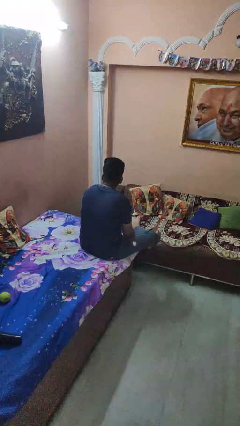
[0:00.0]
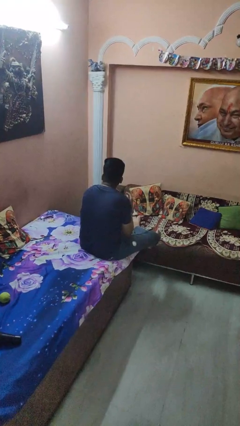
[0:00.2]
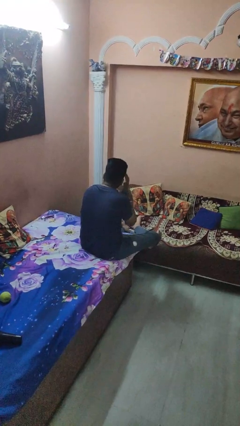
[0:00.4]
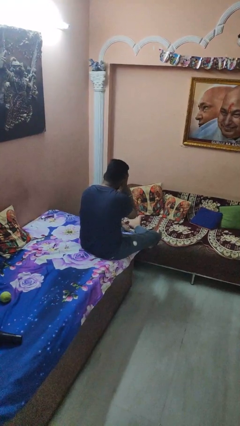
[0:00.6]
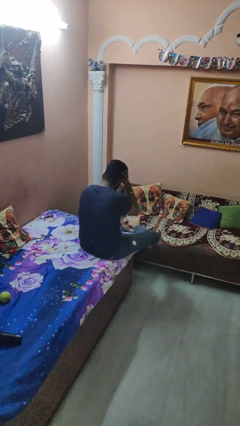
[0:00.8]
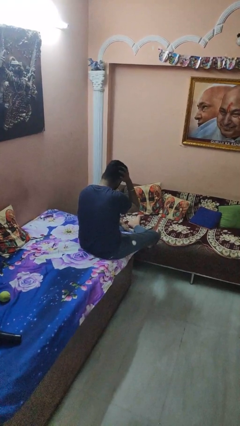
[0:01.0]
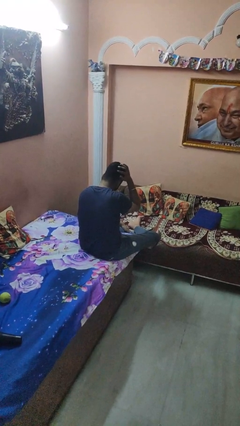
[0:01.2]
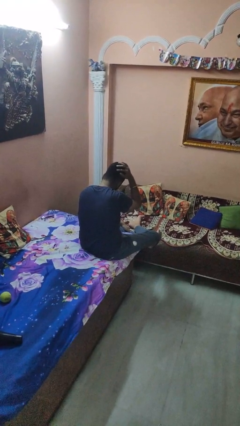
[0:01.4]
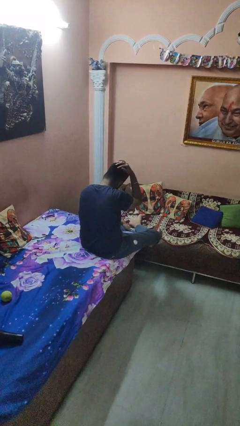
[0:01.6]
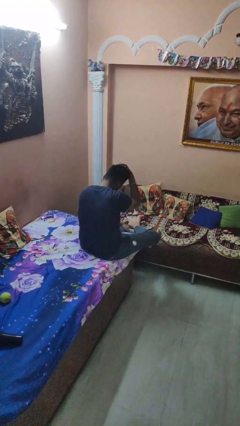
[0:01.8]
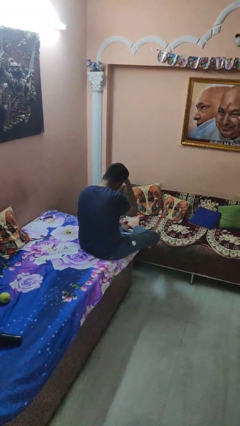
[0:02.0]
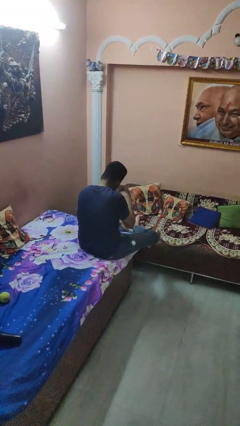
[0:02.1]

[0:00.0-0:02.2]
person strokes hair

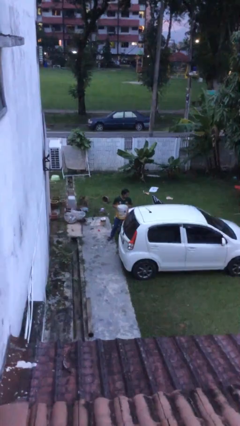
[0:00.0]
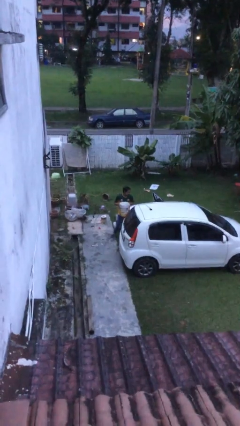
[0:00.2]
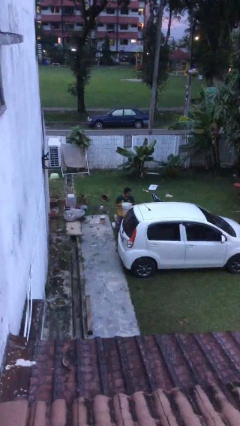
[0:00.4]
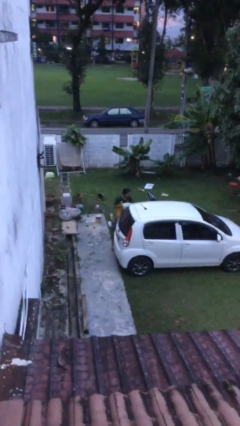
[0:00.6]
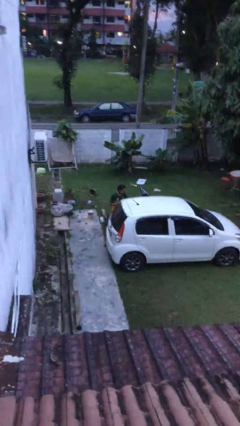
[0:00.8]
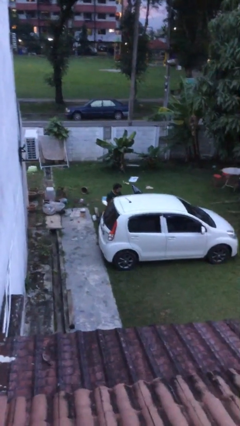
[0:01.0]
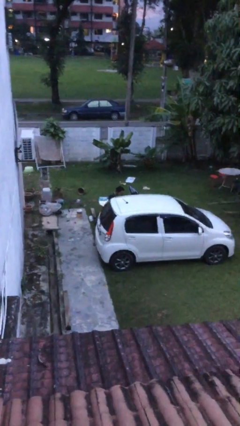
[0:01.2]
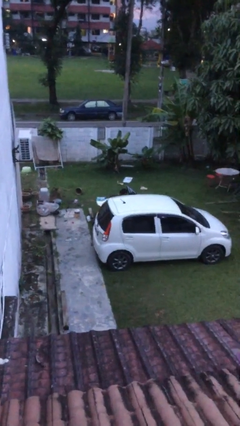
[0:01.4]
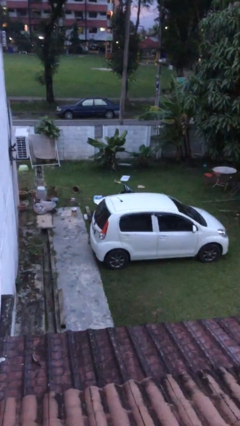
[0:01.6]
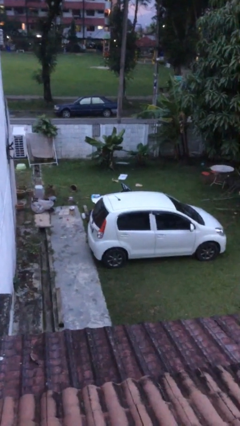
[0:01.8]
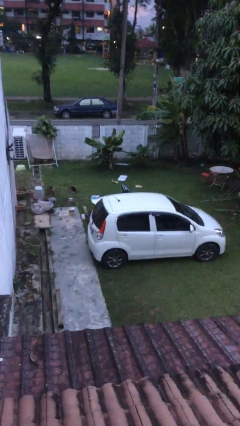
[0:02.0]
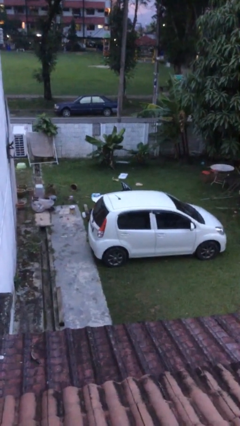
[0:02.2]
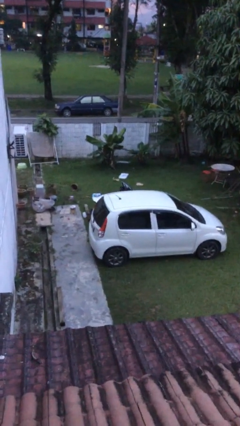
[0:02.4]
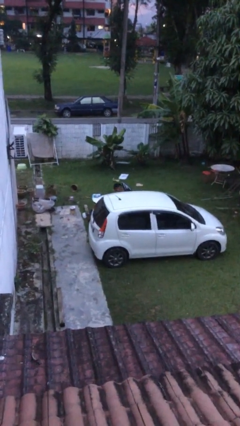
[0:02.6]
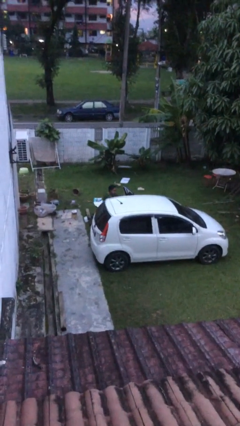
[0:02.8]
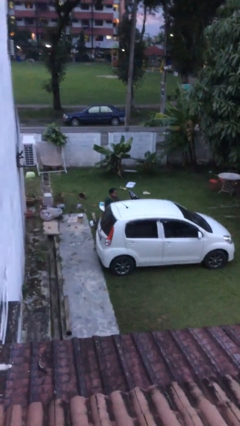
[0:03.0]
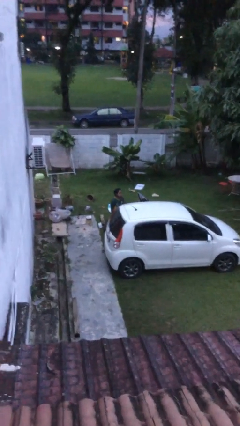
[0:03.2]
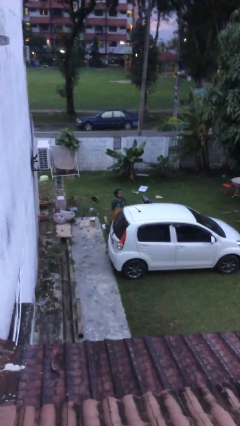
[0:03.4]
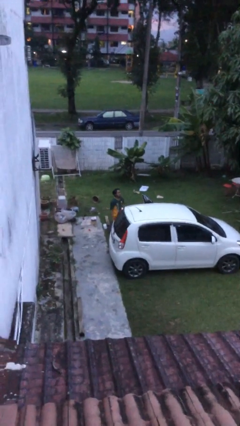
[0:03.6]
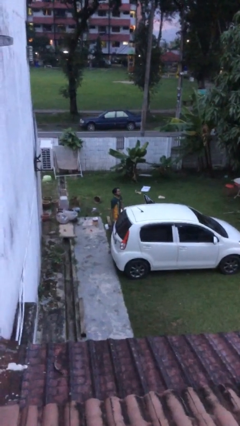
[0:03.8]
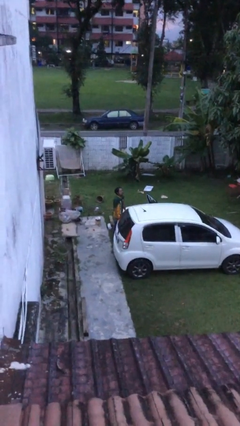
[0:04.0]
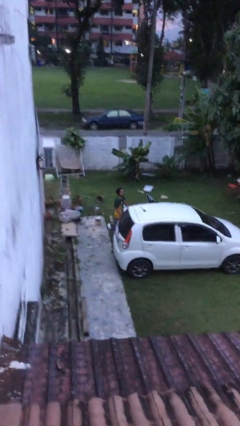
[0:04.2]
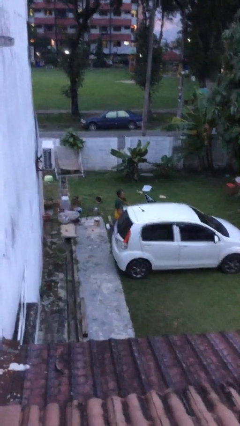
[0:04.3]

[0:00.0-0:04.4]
person loads car

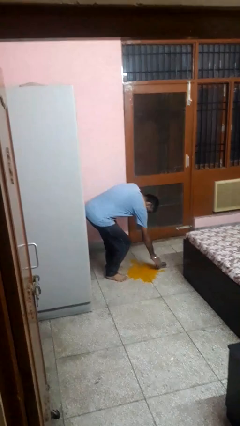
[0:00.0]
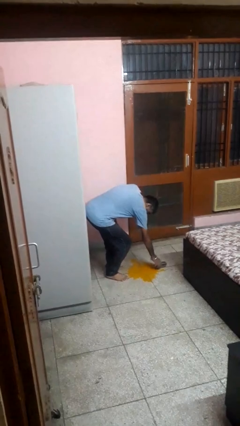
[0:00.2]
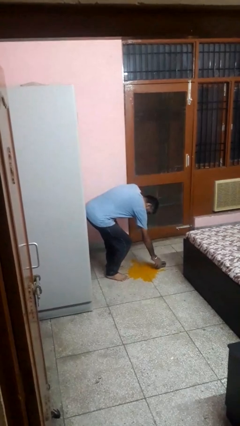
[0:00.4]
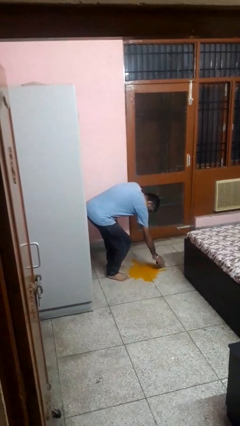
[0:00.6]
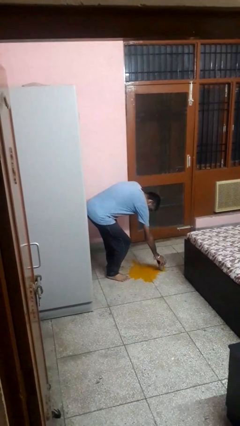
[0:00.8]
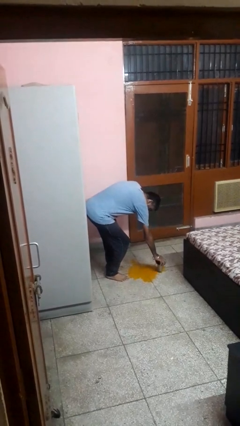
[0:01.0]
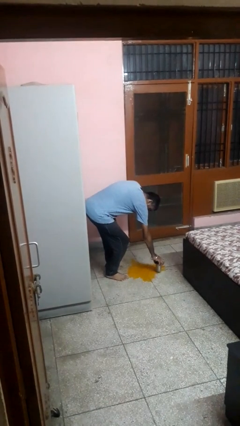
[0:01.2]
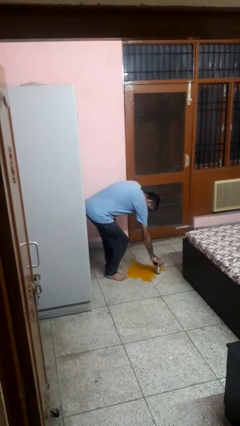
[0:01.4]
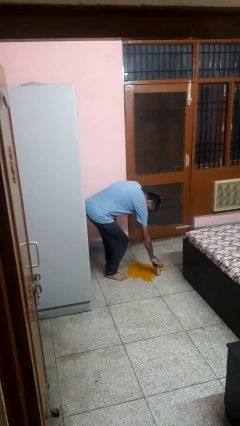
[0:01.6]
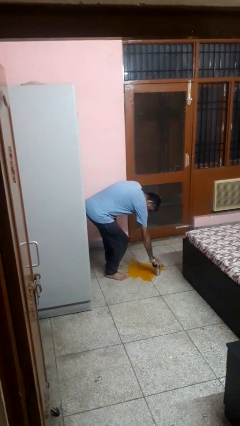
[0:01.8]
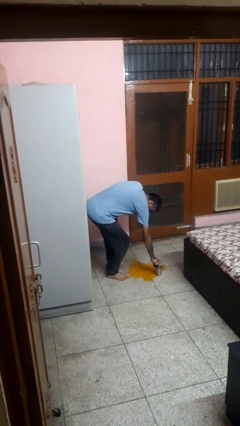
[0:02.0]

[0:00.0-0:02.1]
person sets upright glass

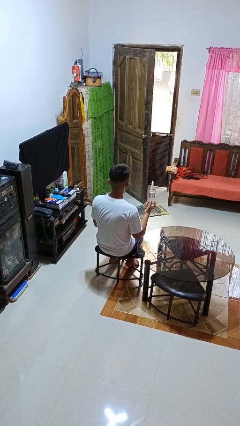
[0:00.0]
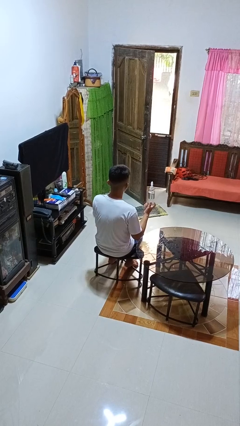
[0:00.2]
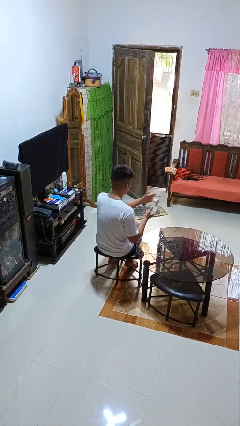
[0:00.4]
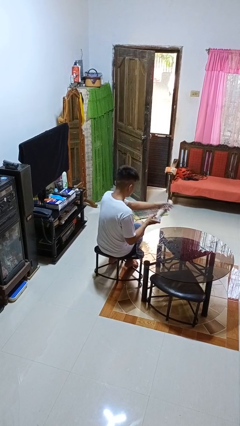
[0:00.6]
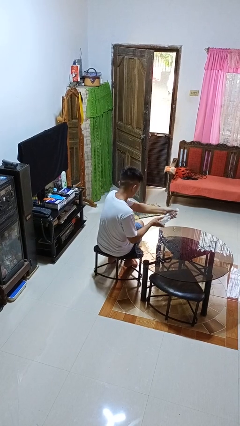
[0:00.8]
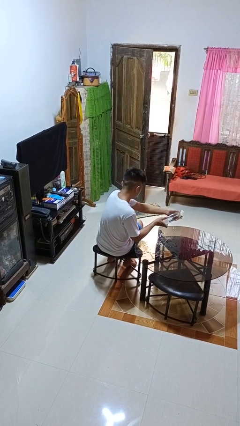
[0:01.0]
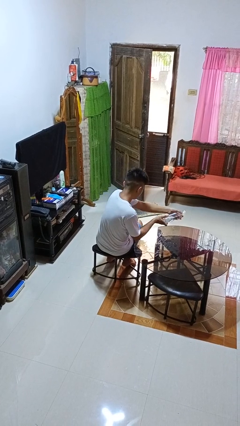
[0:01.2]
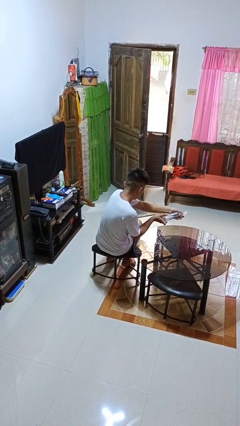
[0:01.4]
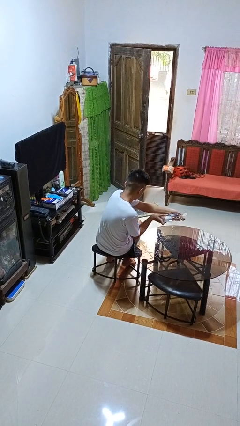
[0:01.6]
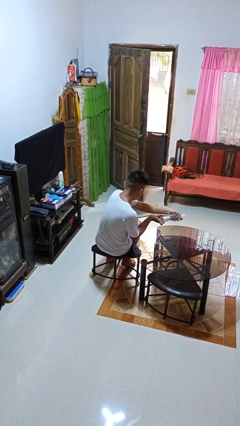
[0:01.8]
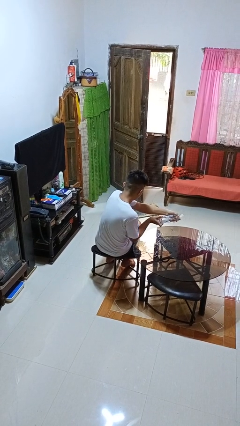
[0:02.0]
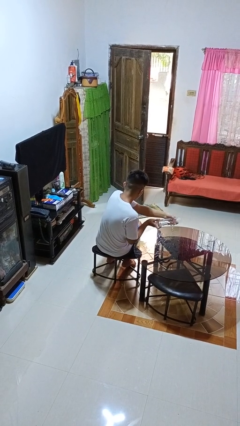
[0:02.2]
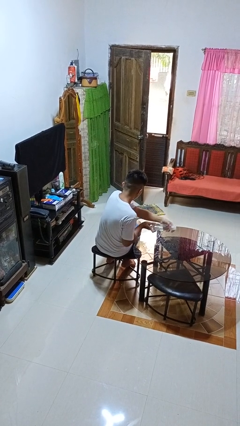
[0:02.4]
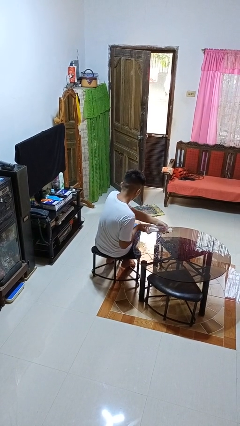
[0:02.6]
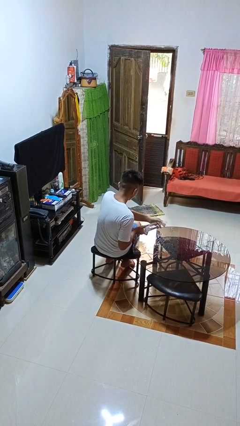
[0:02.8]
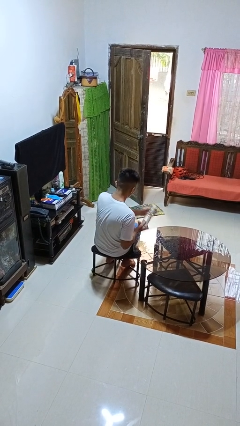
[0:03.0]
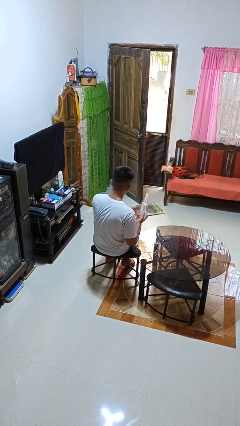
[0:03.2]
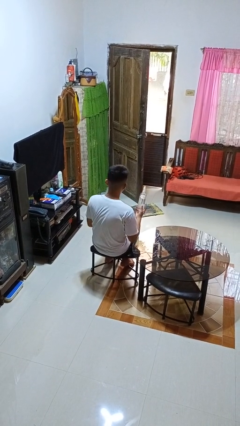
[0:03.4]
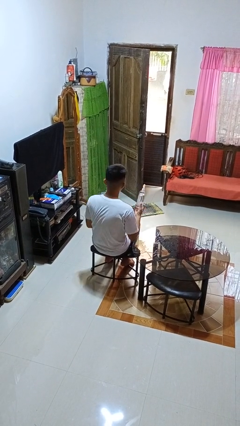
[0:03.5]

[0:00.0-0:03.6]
person sprays from bottle

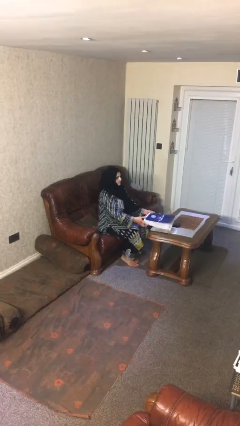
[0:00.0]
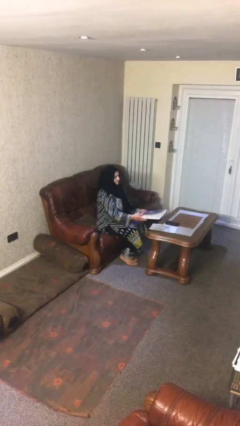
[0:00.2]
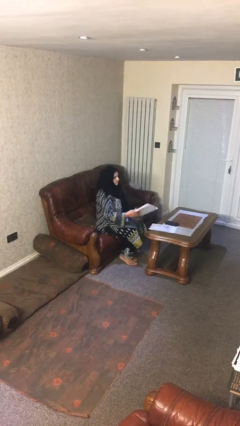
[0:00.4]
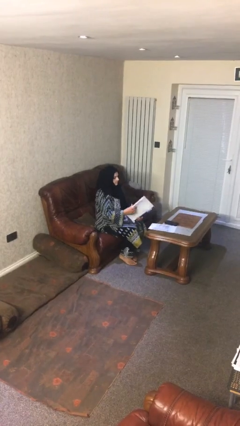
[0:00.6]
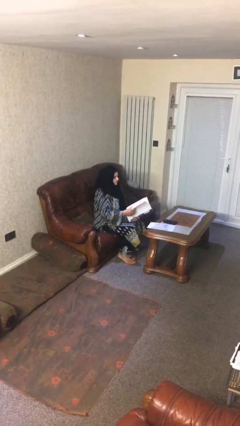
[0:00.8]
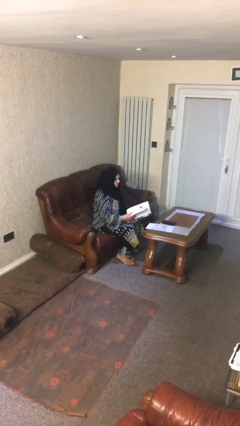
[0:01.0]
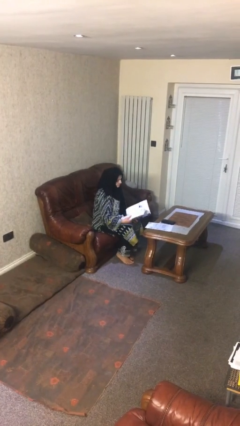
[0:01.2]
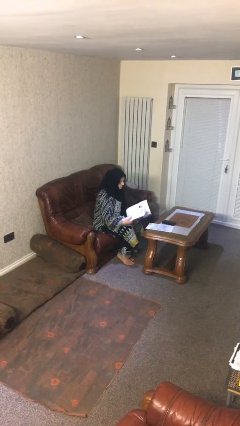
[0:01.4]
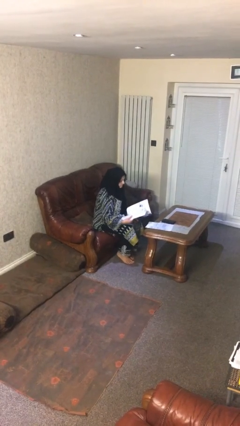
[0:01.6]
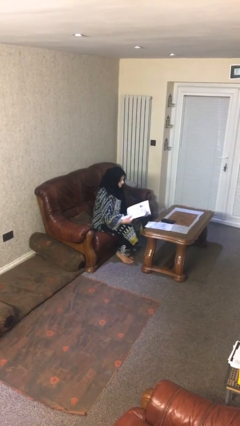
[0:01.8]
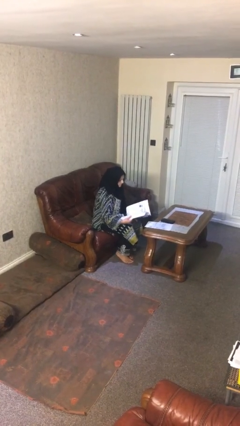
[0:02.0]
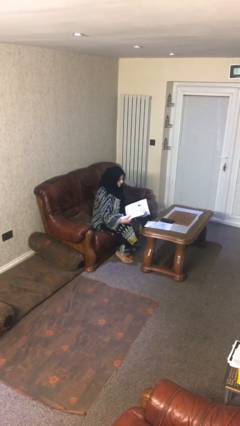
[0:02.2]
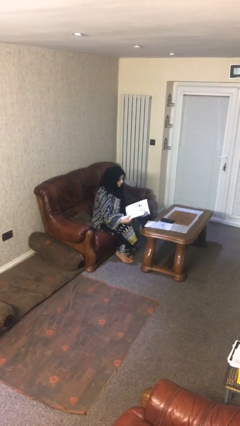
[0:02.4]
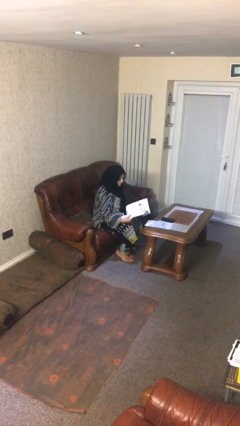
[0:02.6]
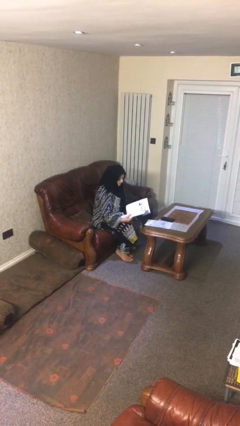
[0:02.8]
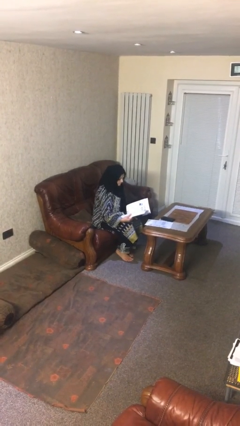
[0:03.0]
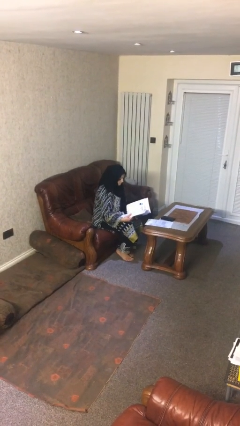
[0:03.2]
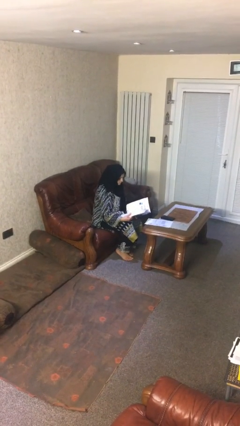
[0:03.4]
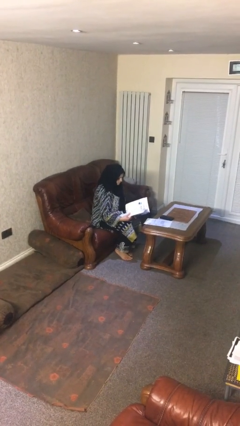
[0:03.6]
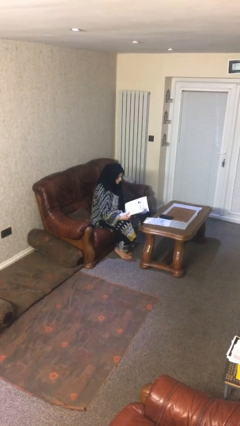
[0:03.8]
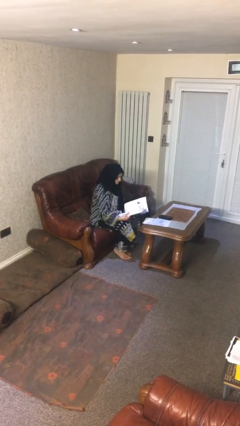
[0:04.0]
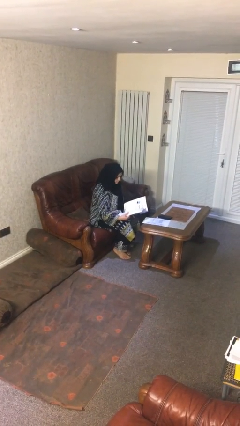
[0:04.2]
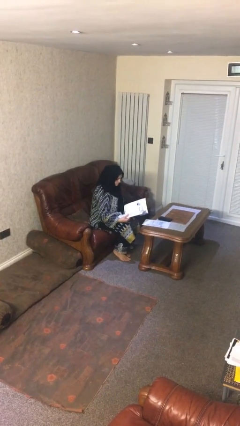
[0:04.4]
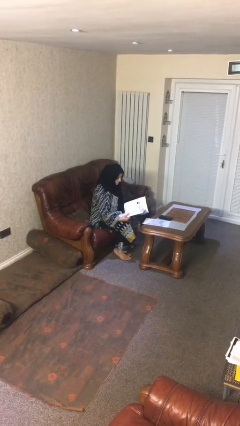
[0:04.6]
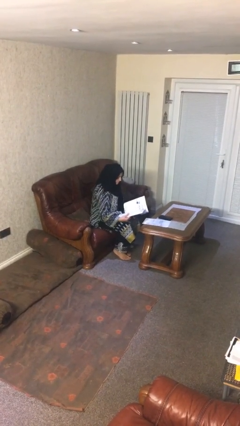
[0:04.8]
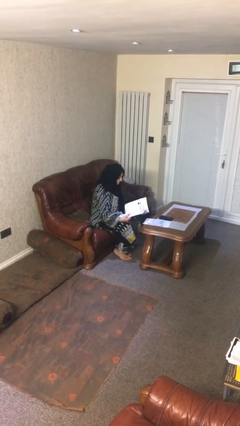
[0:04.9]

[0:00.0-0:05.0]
person reads document

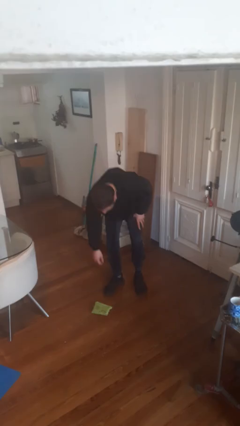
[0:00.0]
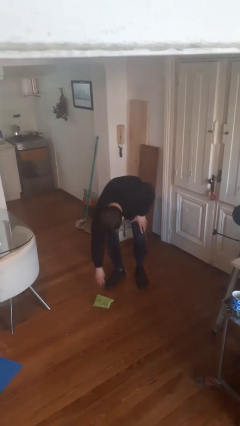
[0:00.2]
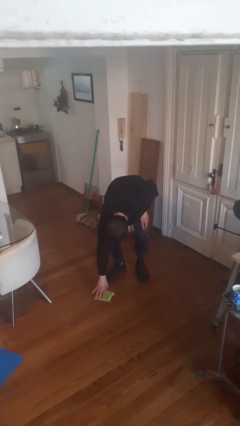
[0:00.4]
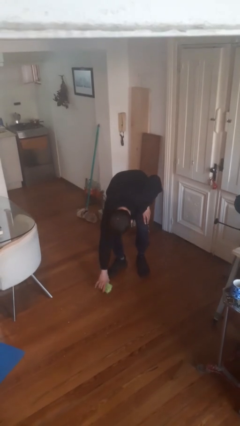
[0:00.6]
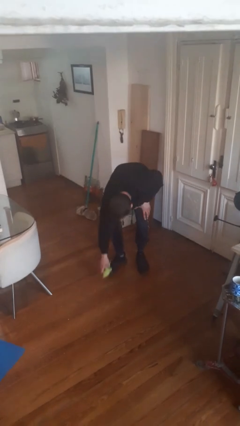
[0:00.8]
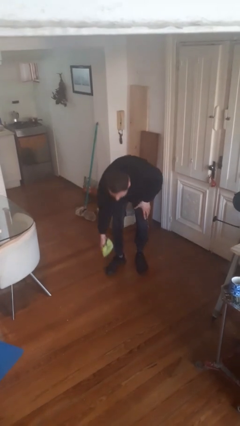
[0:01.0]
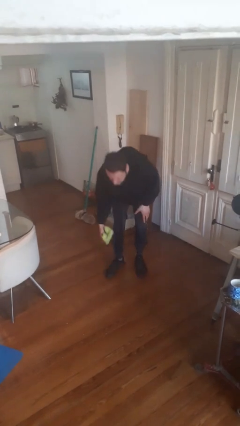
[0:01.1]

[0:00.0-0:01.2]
person picks up object from floor
